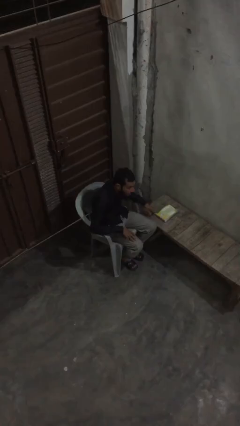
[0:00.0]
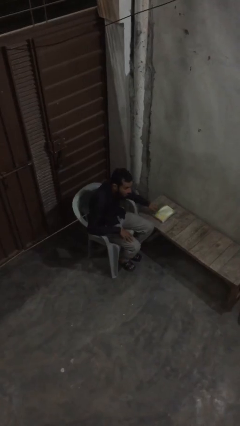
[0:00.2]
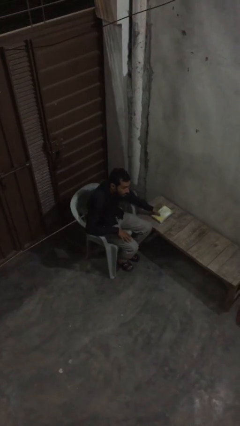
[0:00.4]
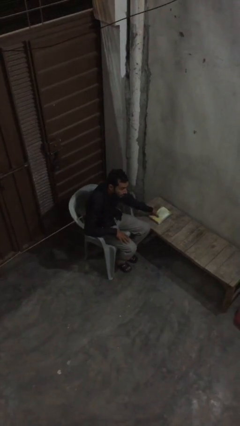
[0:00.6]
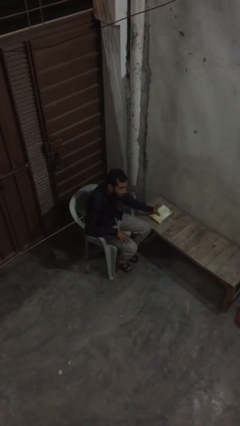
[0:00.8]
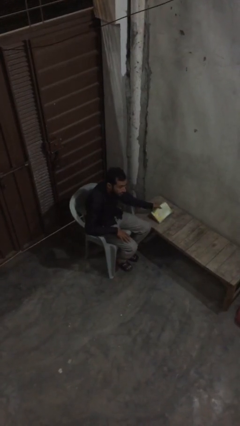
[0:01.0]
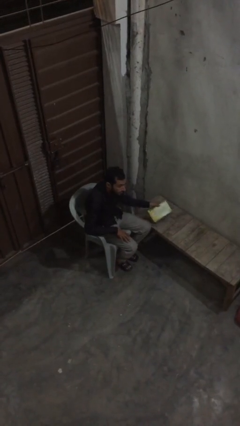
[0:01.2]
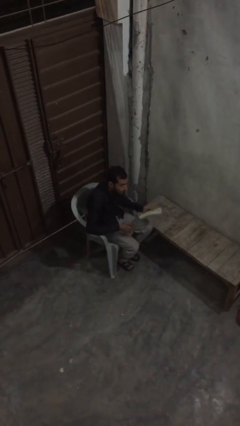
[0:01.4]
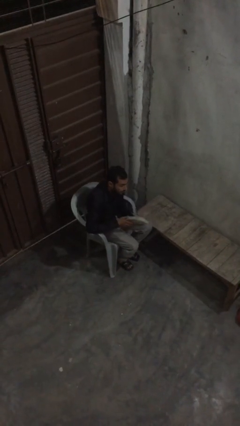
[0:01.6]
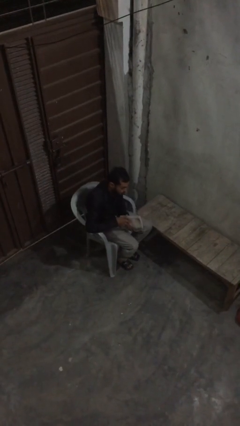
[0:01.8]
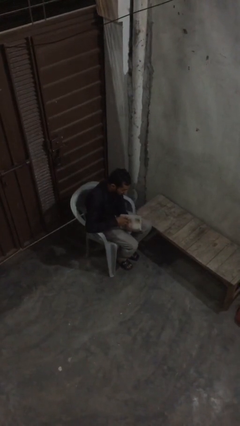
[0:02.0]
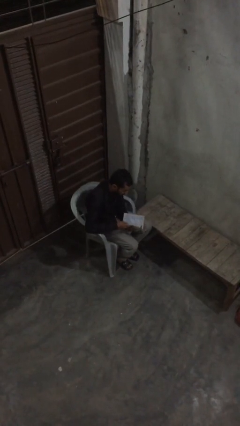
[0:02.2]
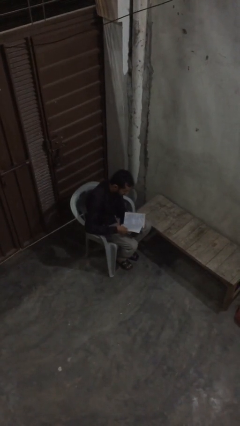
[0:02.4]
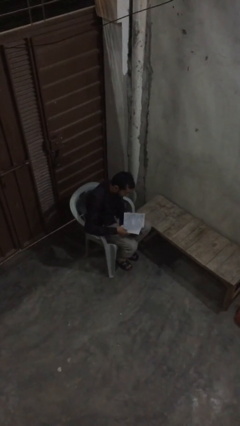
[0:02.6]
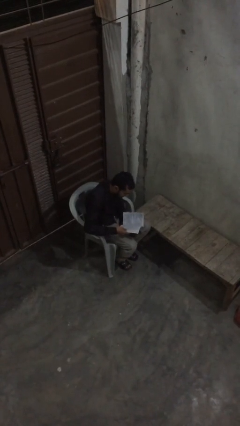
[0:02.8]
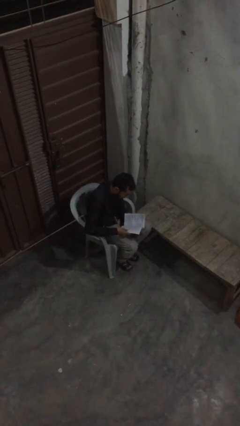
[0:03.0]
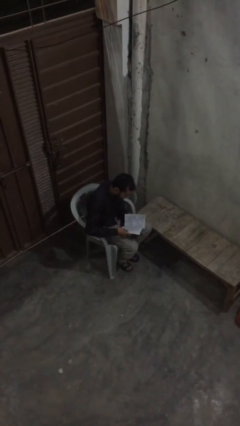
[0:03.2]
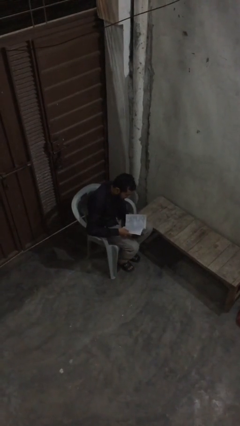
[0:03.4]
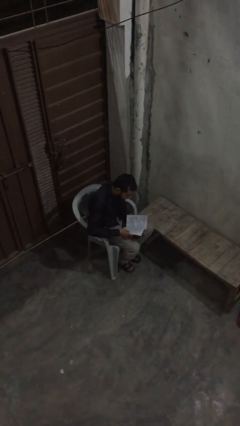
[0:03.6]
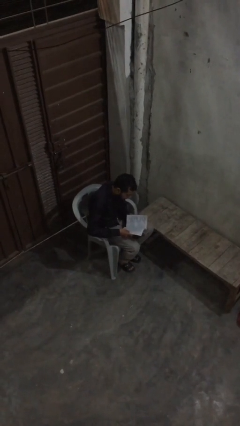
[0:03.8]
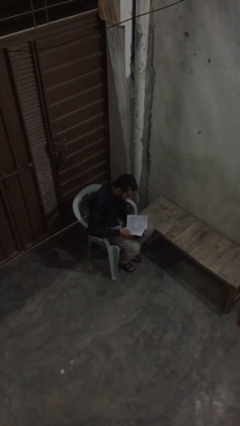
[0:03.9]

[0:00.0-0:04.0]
person reads document

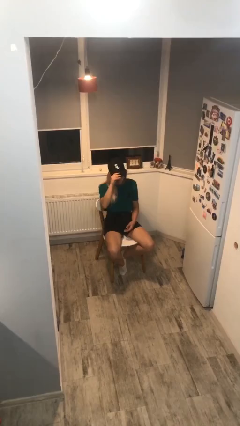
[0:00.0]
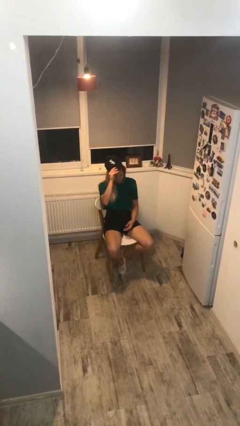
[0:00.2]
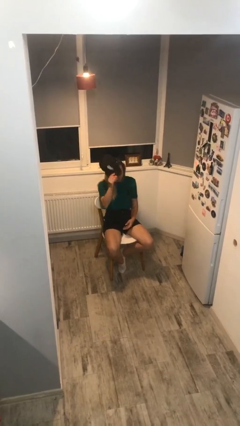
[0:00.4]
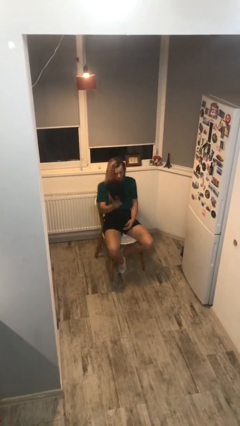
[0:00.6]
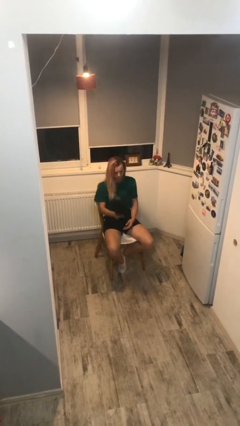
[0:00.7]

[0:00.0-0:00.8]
person takes off hat

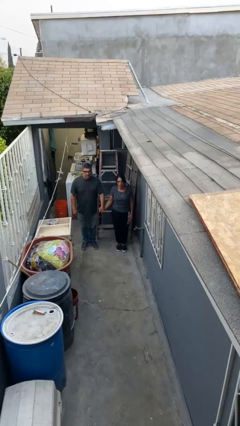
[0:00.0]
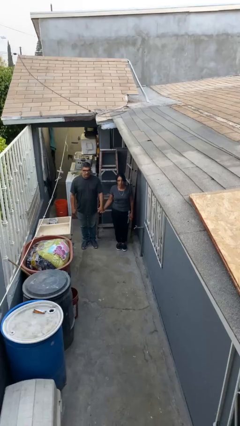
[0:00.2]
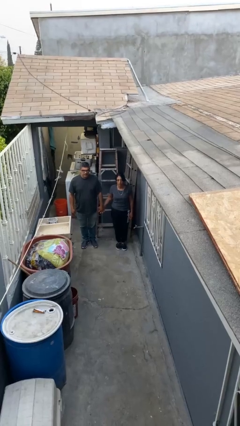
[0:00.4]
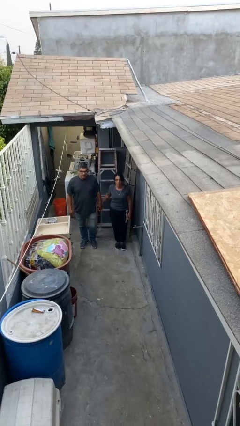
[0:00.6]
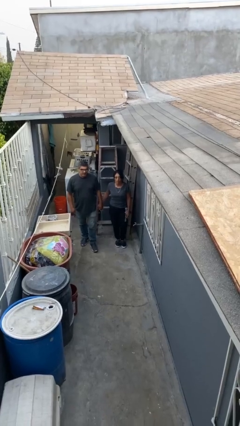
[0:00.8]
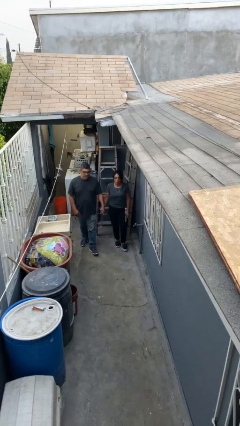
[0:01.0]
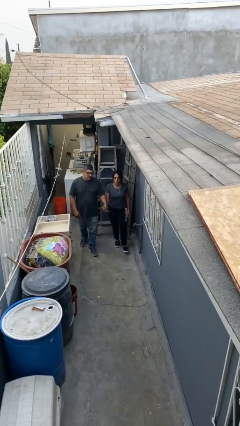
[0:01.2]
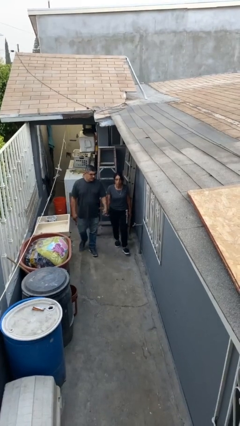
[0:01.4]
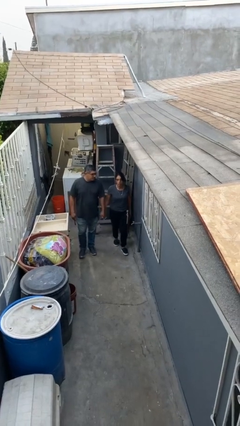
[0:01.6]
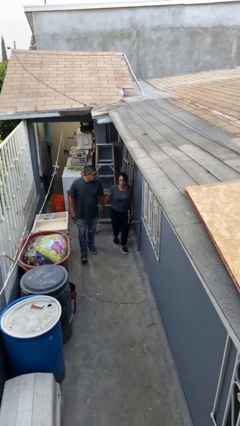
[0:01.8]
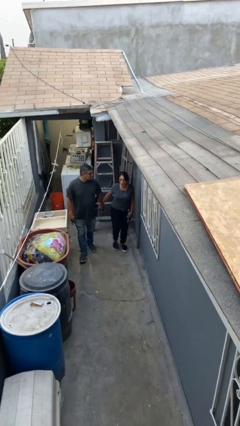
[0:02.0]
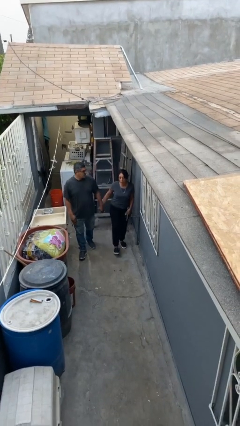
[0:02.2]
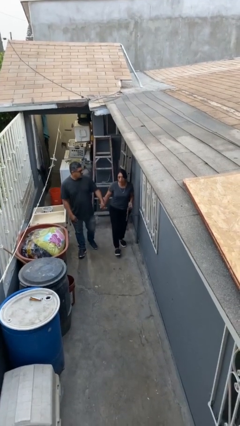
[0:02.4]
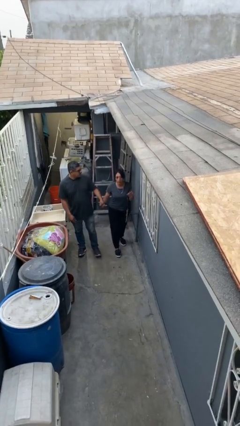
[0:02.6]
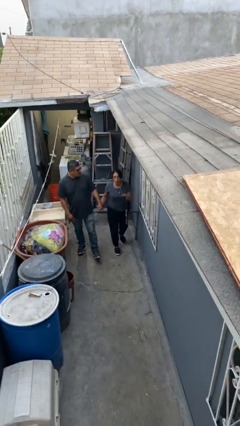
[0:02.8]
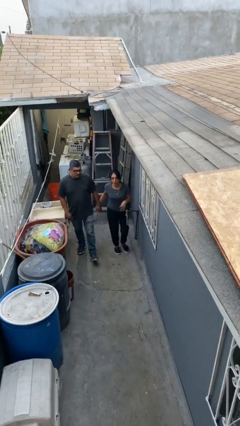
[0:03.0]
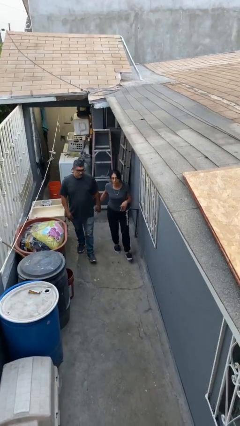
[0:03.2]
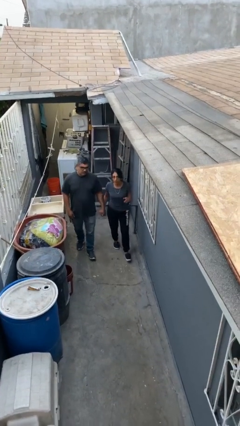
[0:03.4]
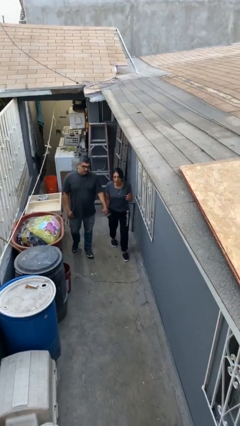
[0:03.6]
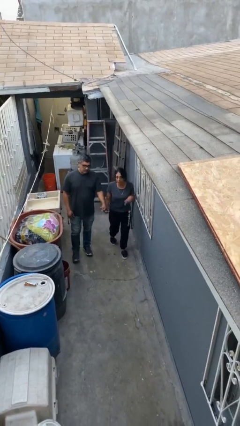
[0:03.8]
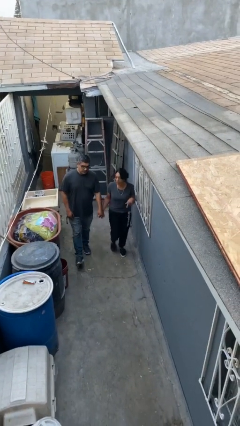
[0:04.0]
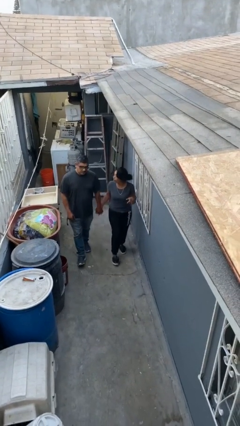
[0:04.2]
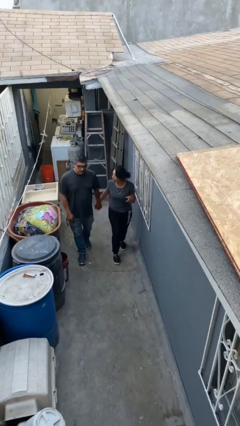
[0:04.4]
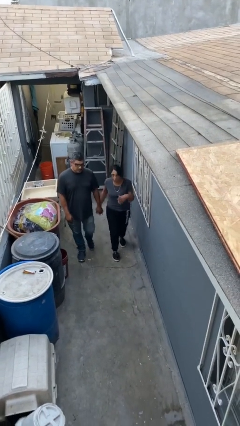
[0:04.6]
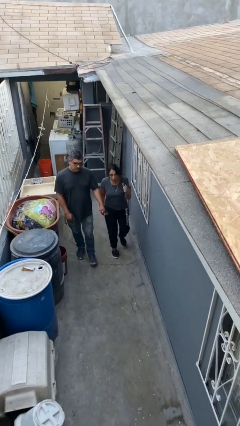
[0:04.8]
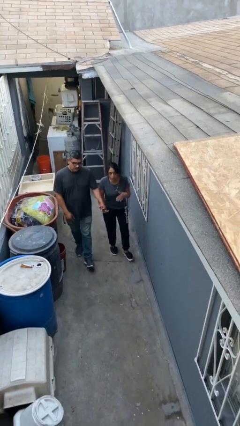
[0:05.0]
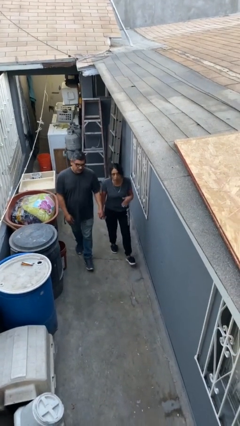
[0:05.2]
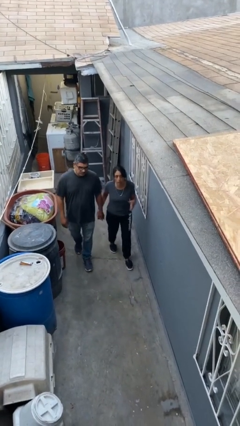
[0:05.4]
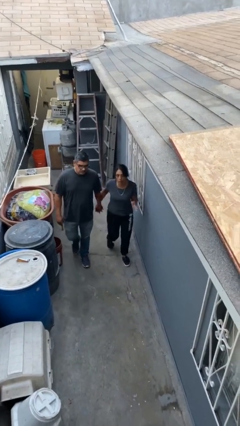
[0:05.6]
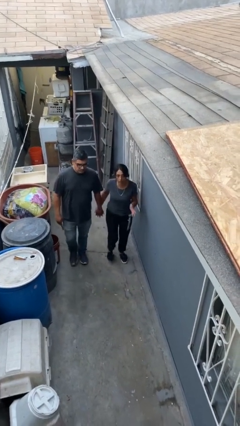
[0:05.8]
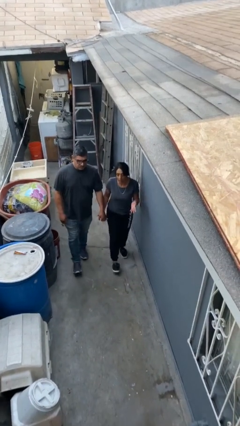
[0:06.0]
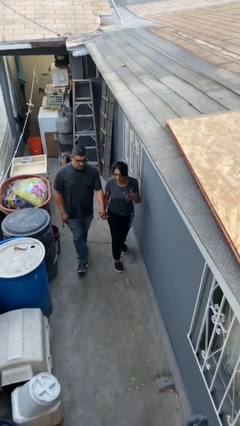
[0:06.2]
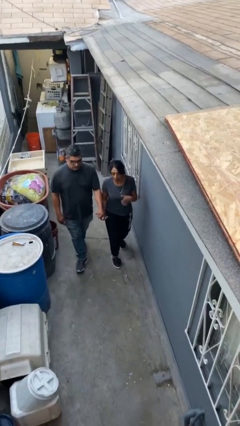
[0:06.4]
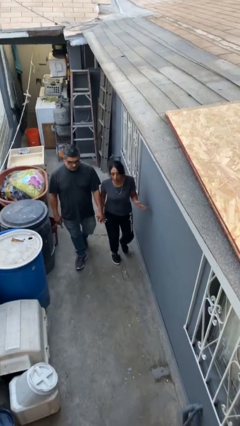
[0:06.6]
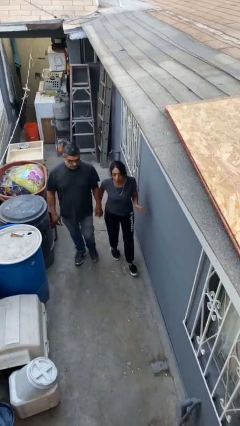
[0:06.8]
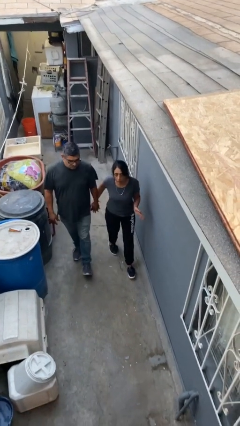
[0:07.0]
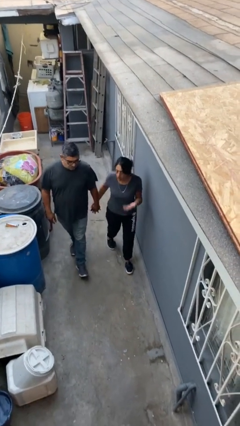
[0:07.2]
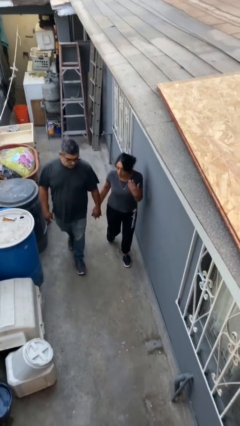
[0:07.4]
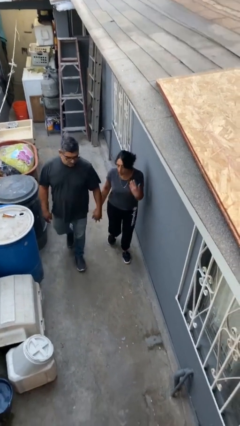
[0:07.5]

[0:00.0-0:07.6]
person holds hand

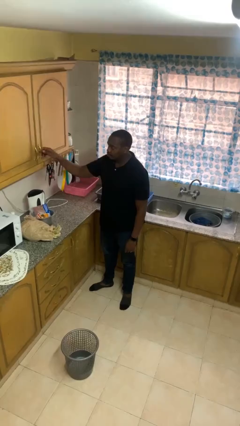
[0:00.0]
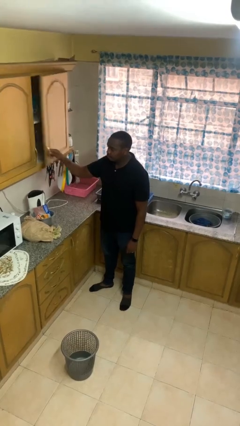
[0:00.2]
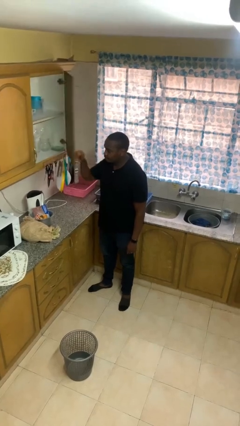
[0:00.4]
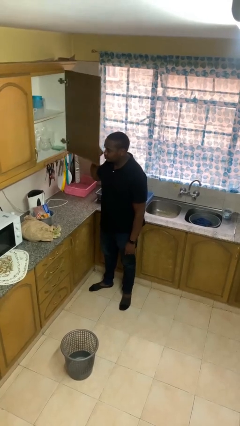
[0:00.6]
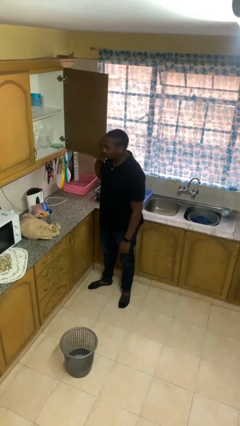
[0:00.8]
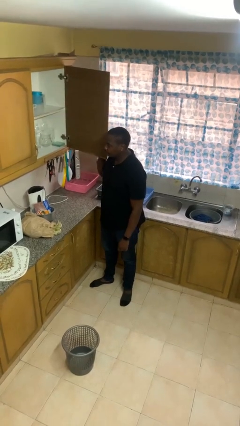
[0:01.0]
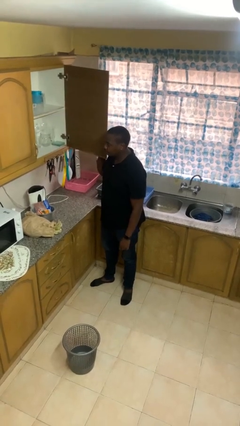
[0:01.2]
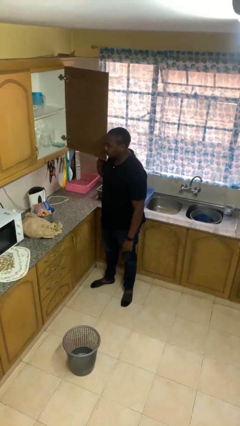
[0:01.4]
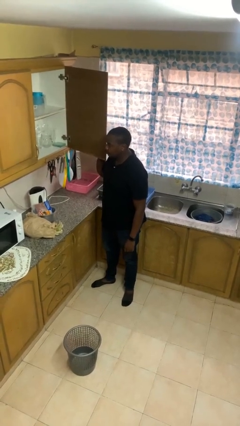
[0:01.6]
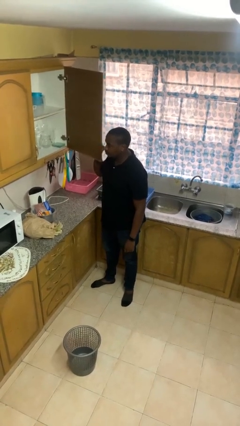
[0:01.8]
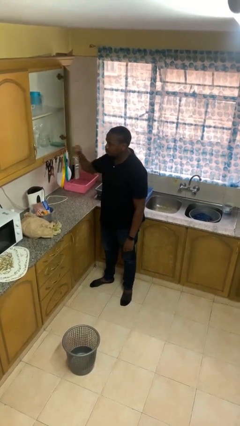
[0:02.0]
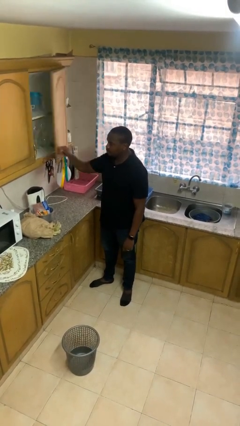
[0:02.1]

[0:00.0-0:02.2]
person opens cabinet

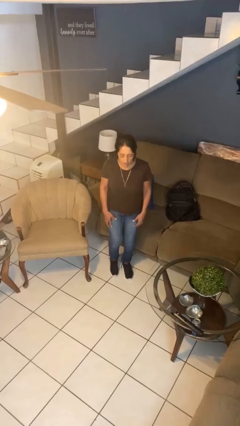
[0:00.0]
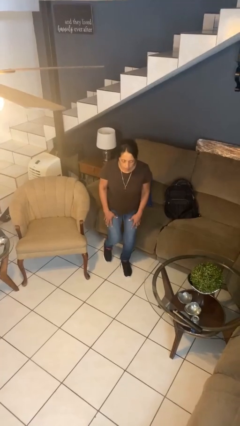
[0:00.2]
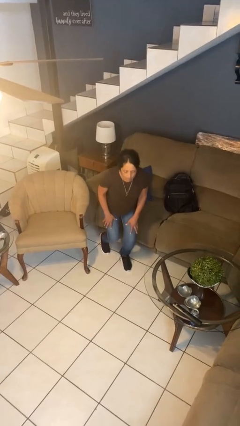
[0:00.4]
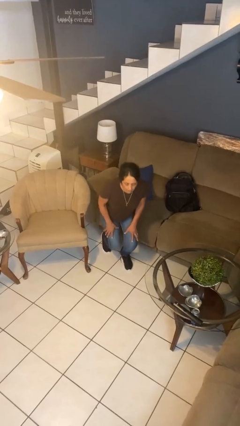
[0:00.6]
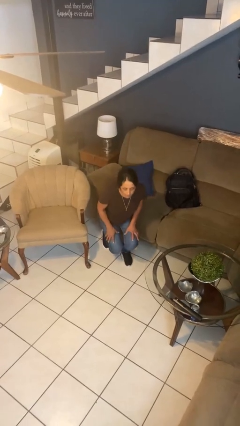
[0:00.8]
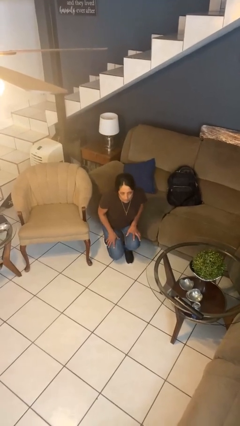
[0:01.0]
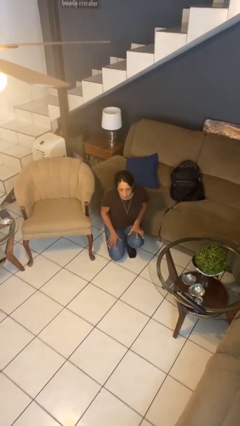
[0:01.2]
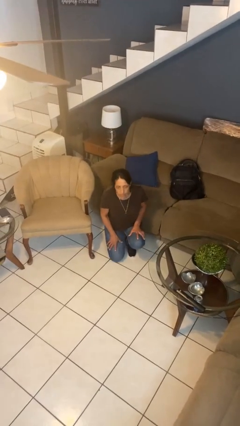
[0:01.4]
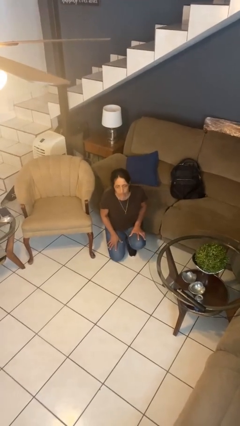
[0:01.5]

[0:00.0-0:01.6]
person kneels

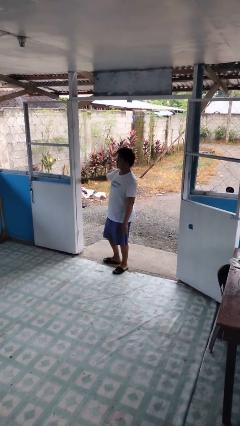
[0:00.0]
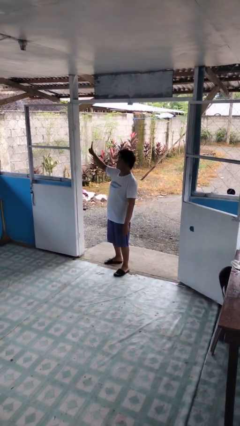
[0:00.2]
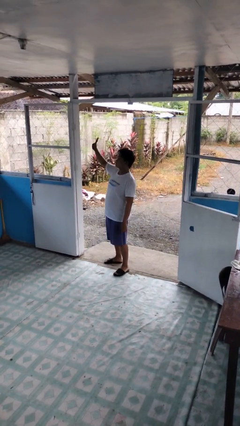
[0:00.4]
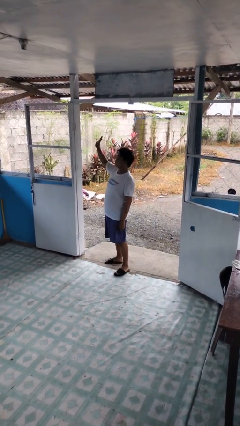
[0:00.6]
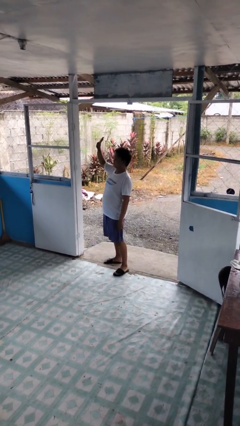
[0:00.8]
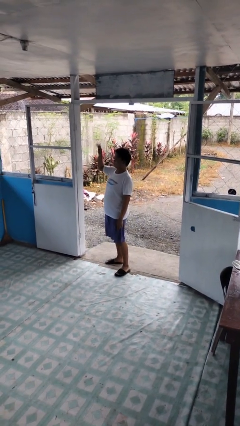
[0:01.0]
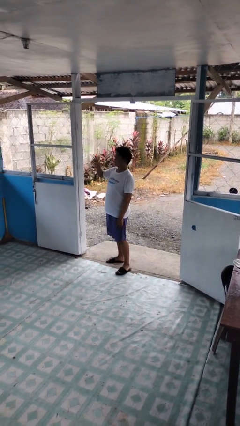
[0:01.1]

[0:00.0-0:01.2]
person gestures number four
